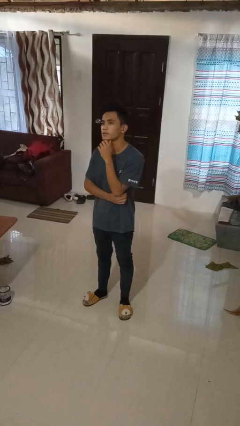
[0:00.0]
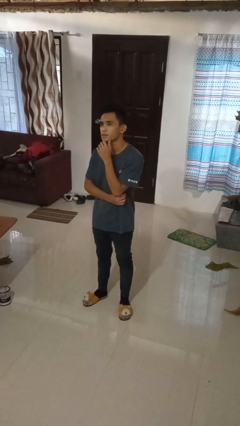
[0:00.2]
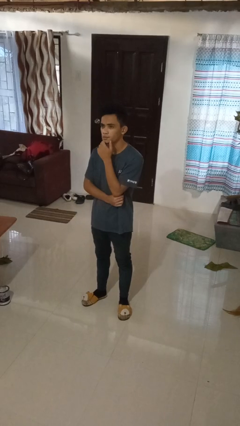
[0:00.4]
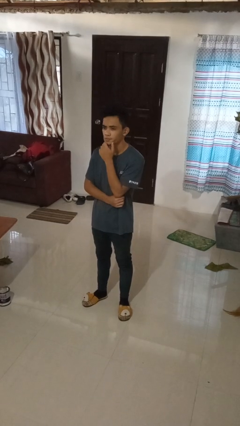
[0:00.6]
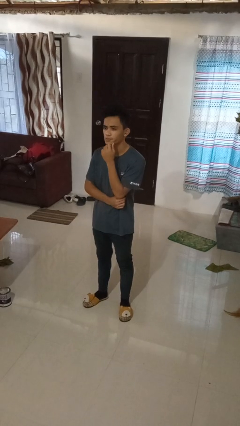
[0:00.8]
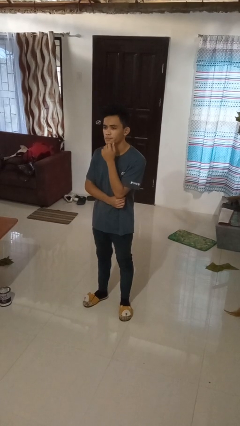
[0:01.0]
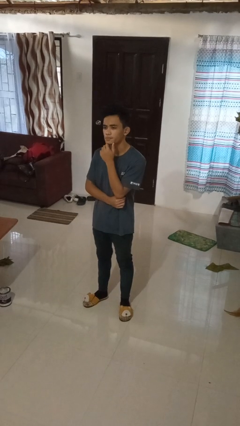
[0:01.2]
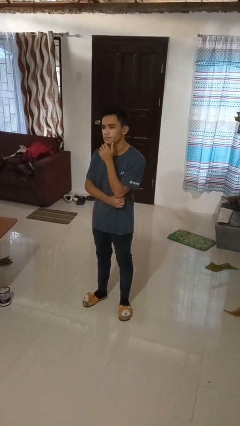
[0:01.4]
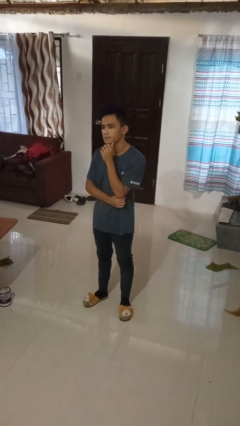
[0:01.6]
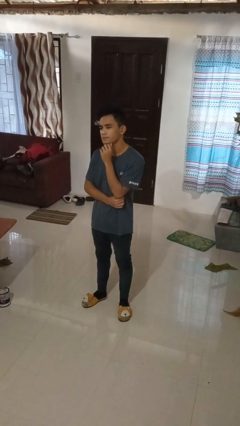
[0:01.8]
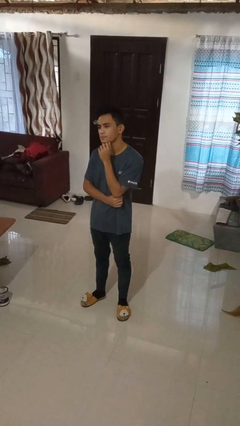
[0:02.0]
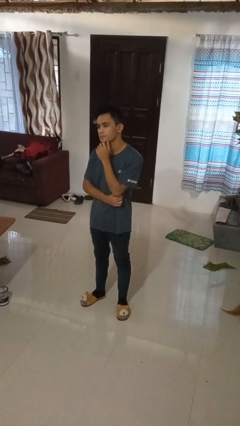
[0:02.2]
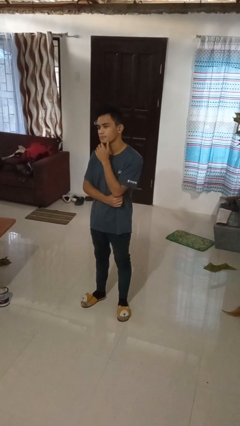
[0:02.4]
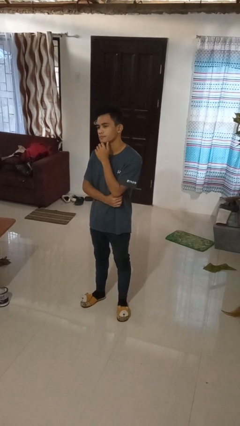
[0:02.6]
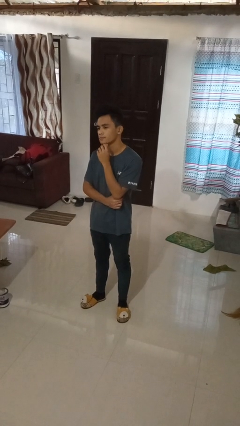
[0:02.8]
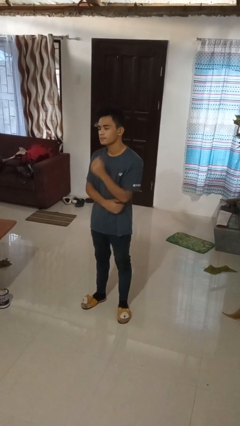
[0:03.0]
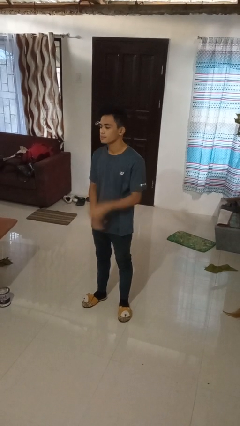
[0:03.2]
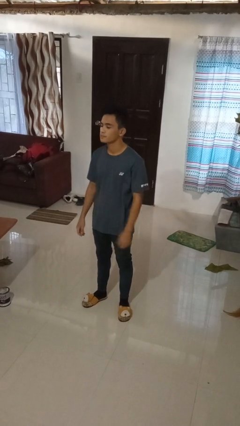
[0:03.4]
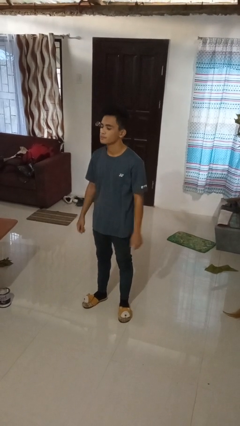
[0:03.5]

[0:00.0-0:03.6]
person strokes chin

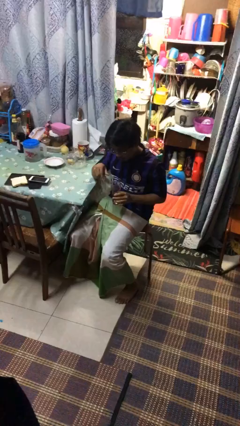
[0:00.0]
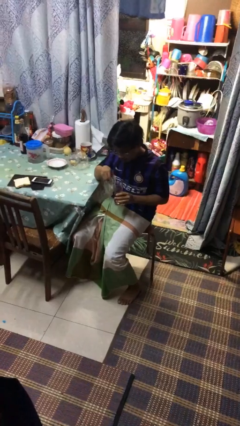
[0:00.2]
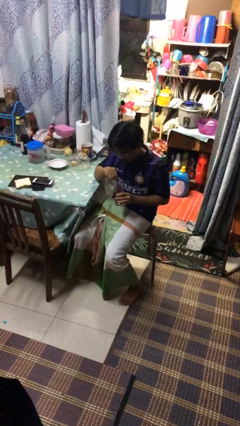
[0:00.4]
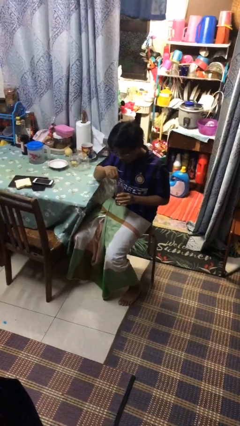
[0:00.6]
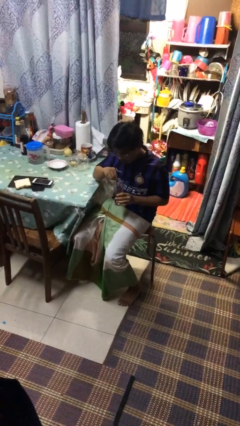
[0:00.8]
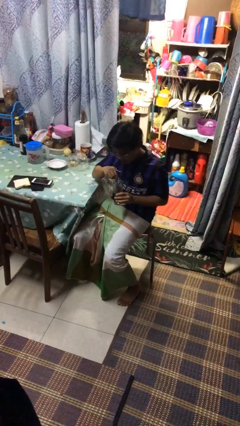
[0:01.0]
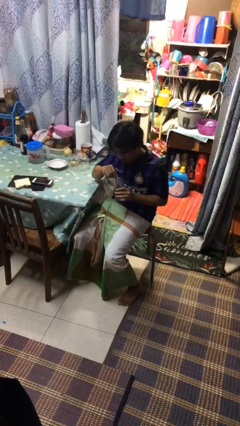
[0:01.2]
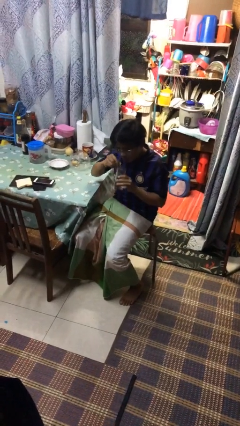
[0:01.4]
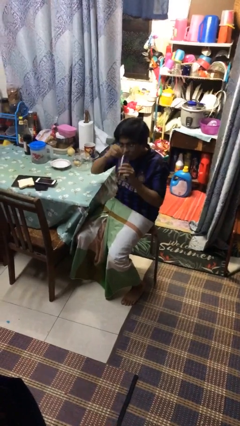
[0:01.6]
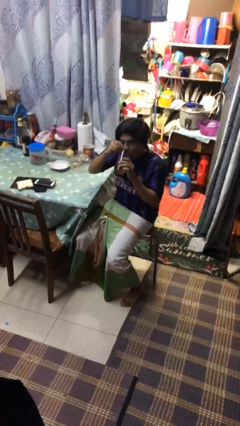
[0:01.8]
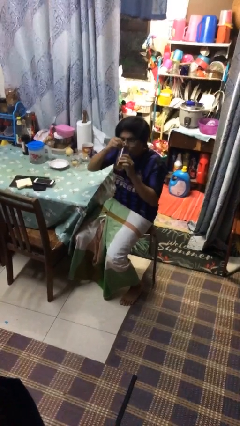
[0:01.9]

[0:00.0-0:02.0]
person stirs mug

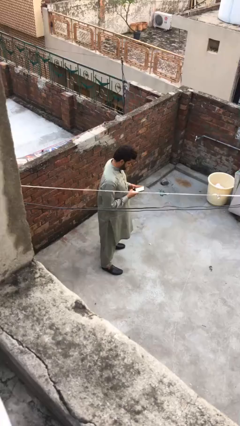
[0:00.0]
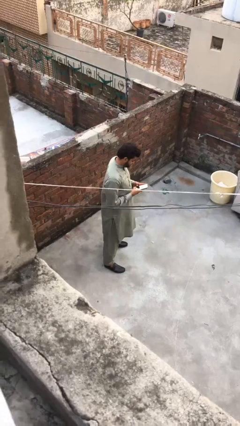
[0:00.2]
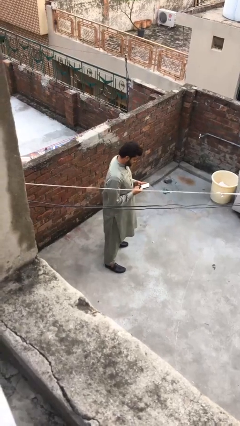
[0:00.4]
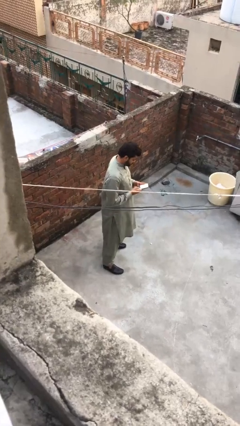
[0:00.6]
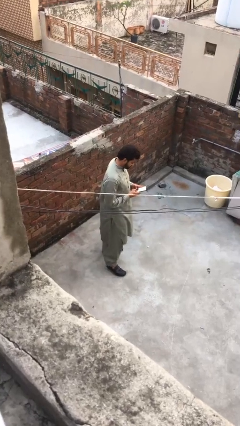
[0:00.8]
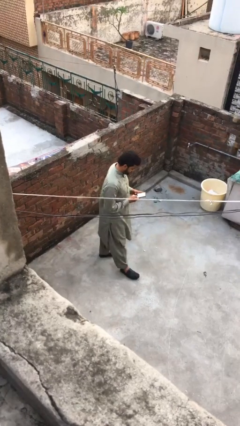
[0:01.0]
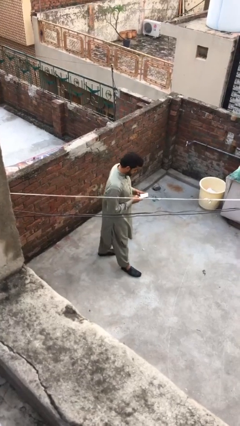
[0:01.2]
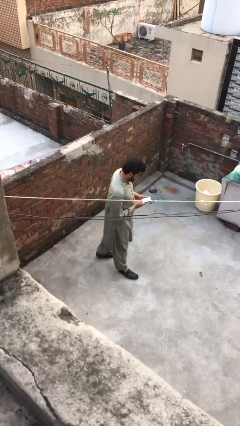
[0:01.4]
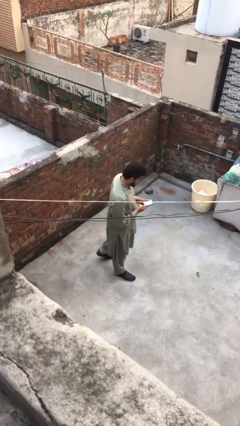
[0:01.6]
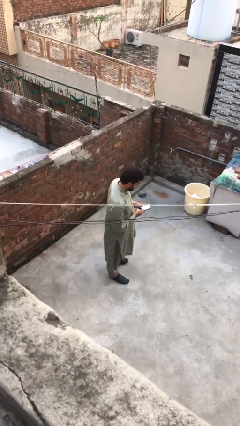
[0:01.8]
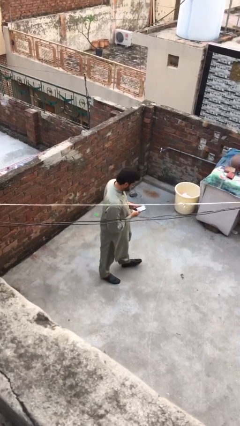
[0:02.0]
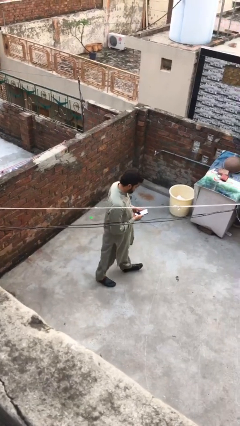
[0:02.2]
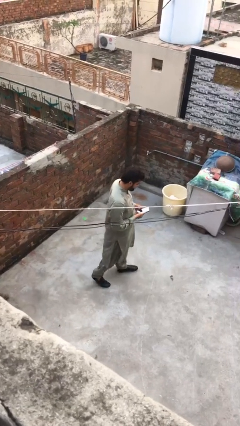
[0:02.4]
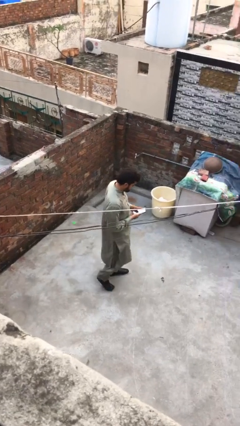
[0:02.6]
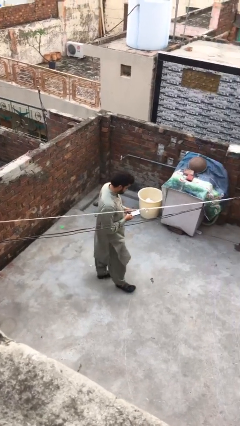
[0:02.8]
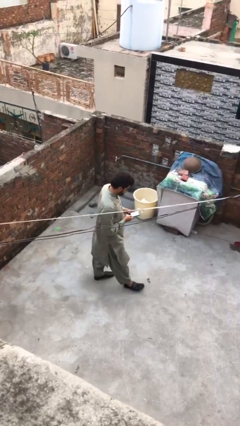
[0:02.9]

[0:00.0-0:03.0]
person texts on phone

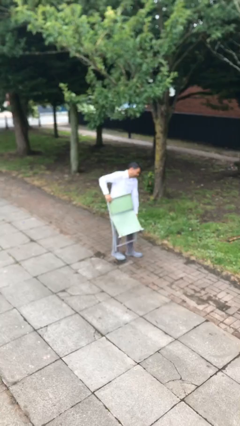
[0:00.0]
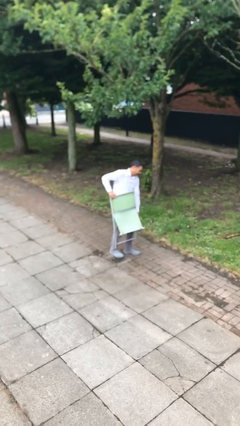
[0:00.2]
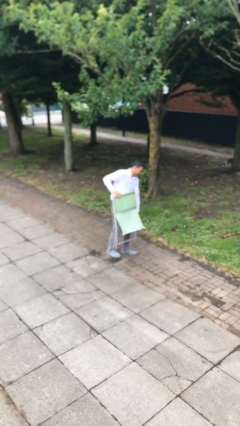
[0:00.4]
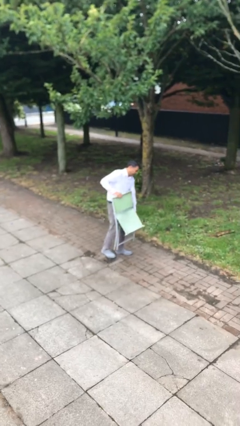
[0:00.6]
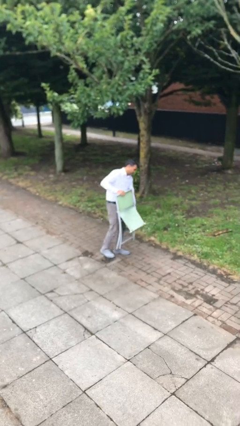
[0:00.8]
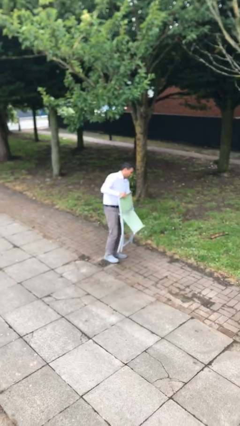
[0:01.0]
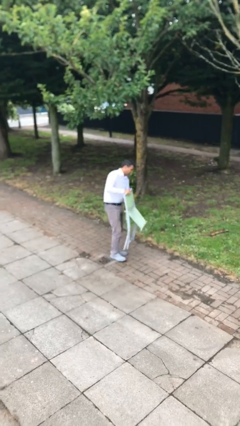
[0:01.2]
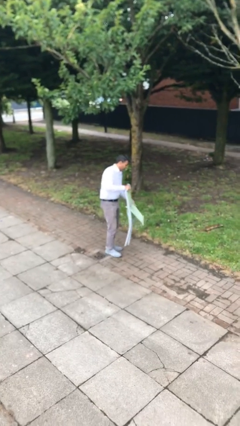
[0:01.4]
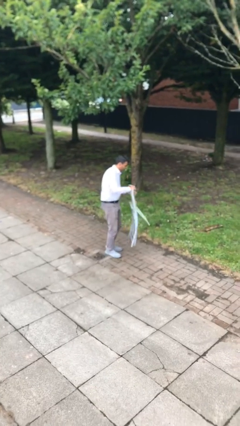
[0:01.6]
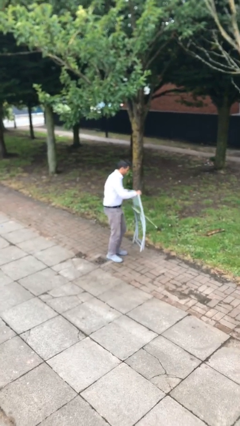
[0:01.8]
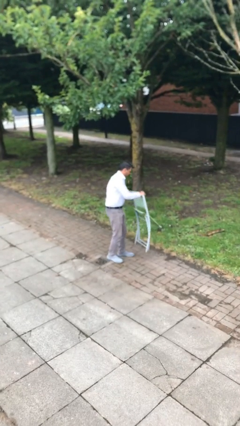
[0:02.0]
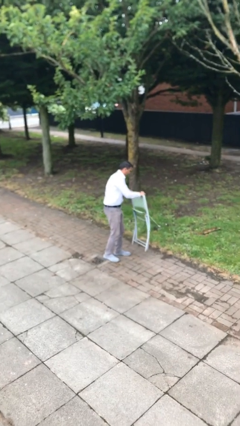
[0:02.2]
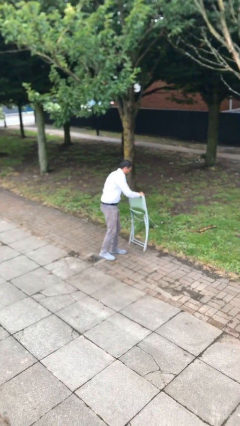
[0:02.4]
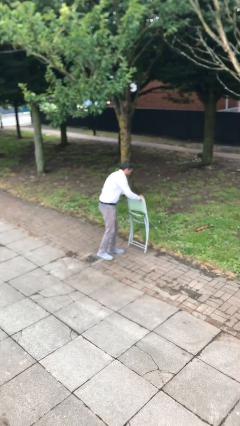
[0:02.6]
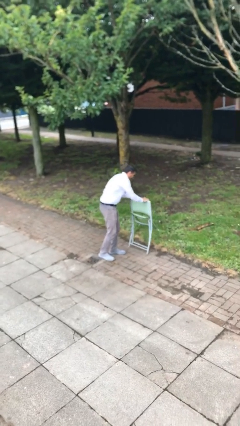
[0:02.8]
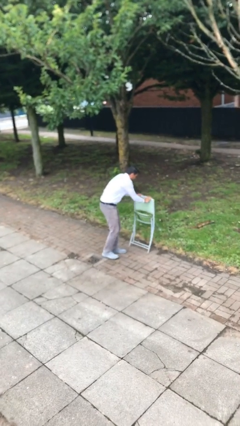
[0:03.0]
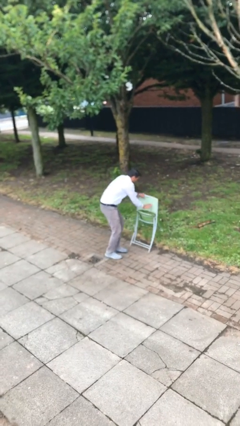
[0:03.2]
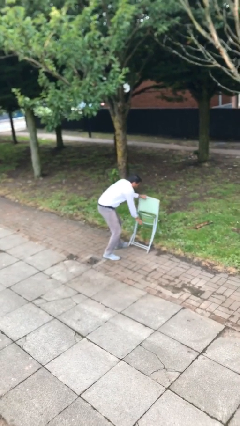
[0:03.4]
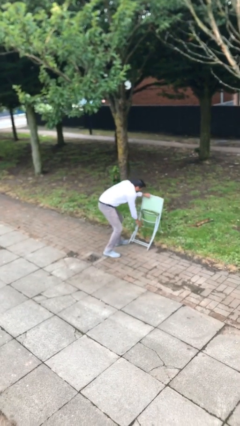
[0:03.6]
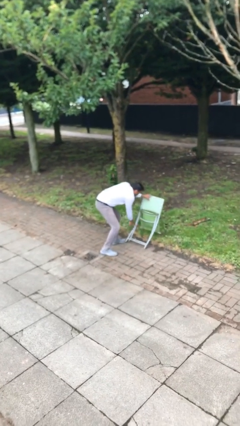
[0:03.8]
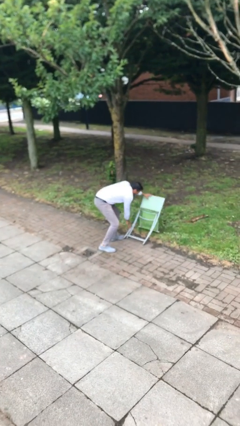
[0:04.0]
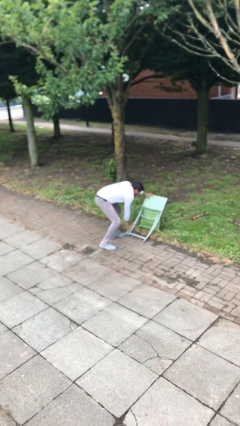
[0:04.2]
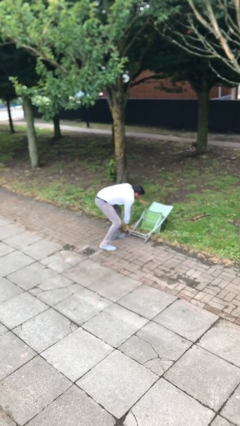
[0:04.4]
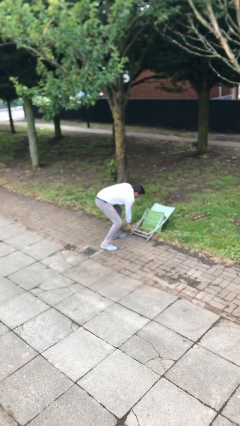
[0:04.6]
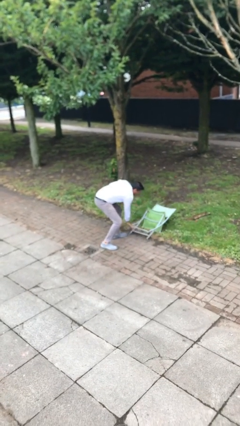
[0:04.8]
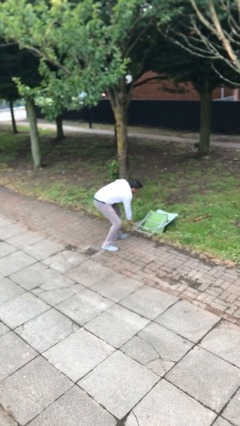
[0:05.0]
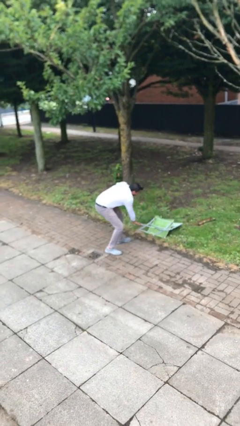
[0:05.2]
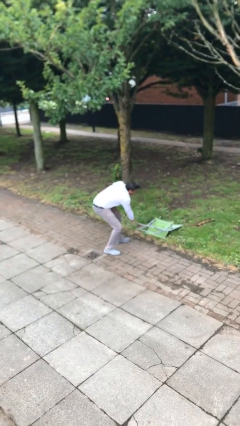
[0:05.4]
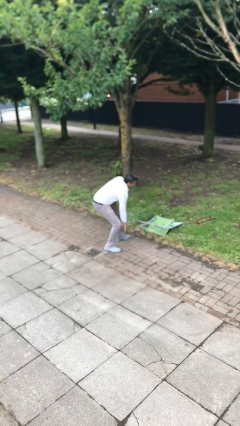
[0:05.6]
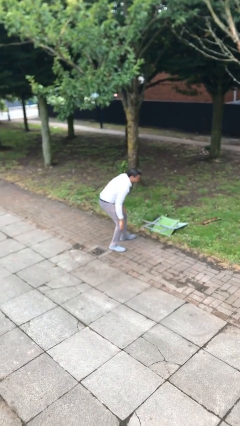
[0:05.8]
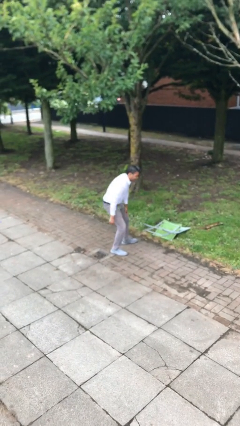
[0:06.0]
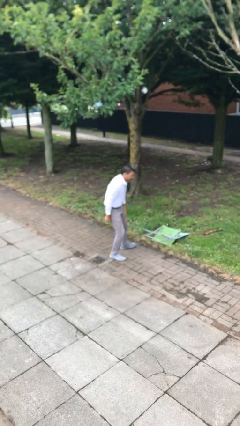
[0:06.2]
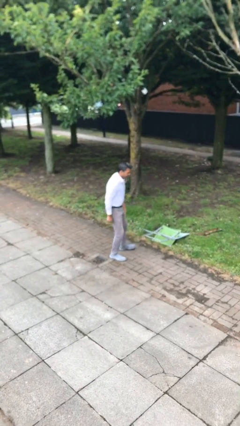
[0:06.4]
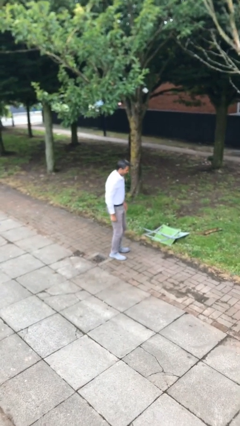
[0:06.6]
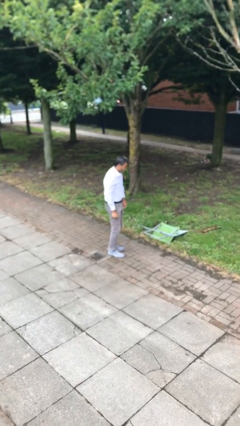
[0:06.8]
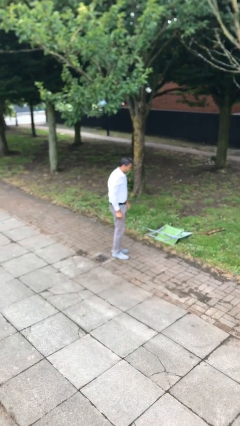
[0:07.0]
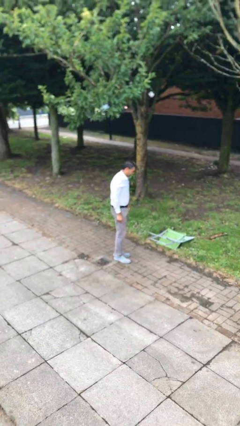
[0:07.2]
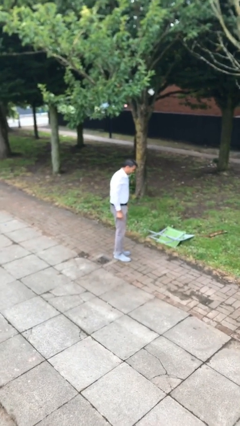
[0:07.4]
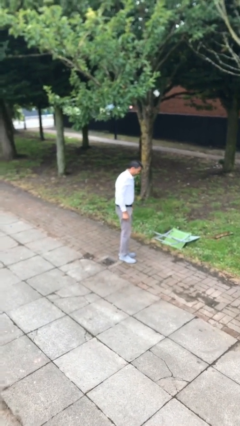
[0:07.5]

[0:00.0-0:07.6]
person puts down object on floor

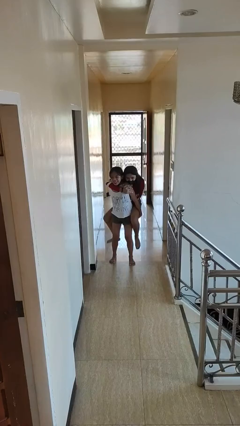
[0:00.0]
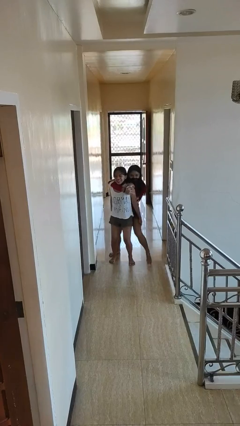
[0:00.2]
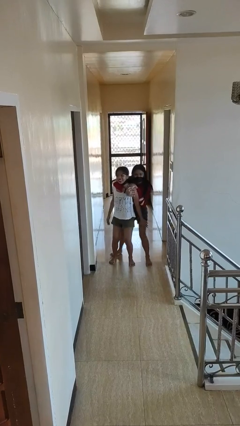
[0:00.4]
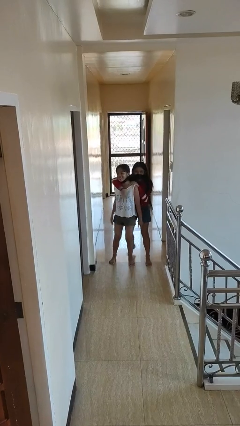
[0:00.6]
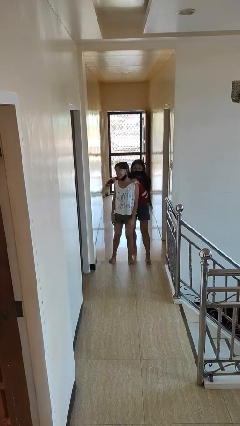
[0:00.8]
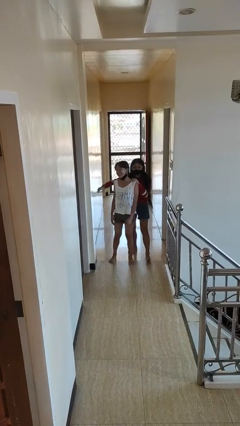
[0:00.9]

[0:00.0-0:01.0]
person puts down person

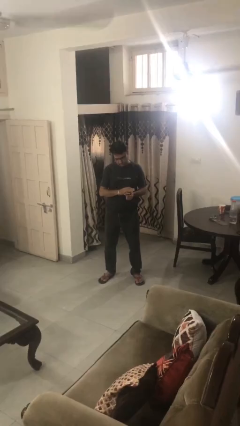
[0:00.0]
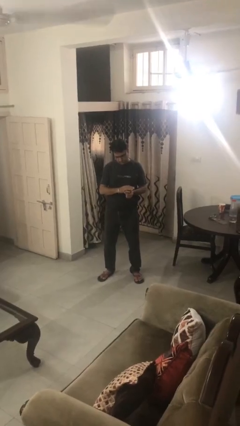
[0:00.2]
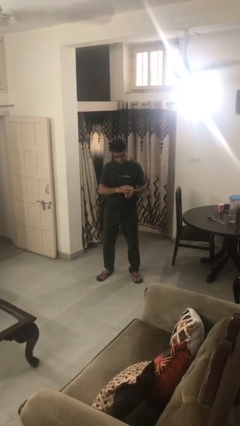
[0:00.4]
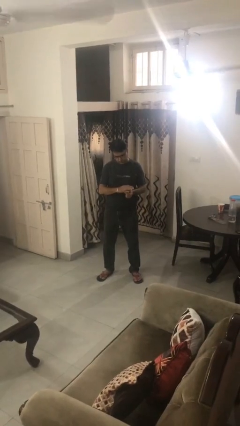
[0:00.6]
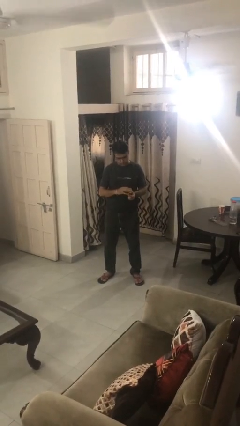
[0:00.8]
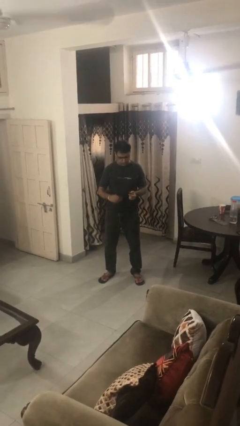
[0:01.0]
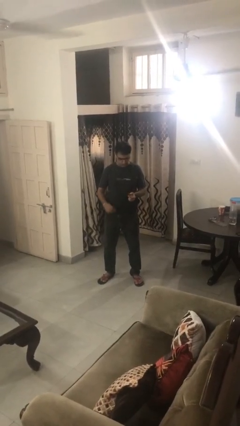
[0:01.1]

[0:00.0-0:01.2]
person takes off ring
